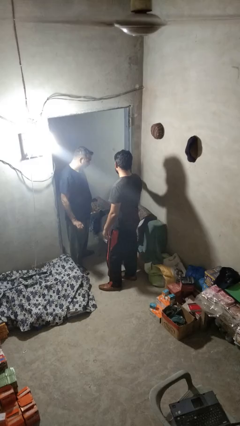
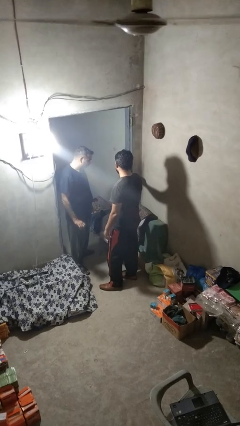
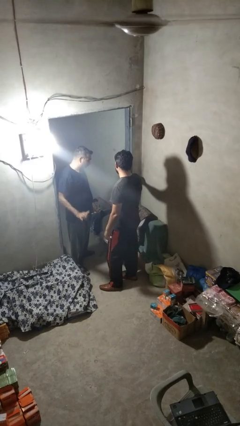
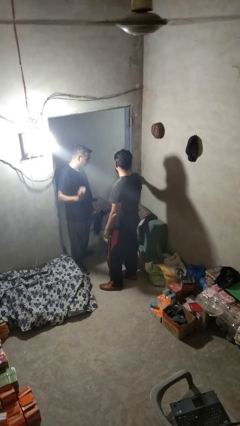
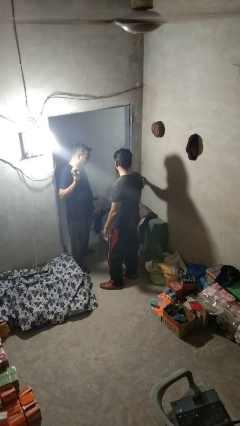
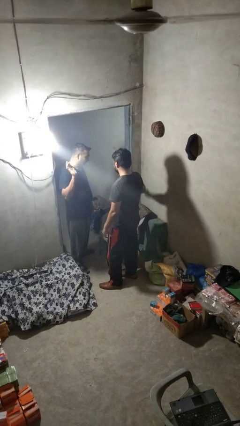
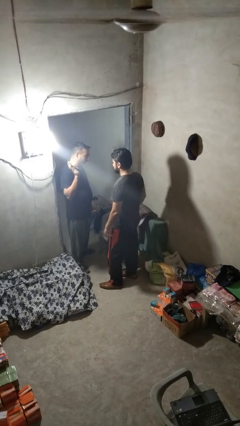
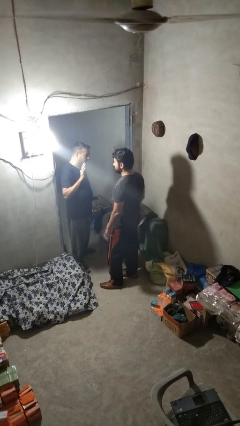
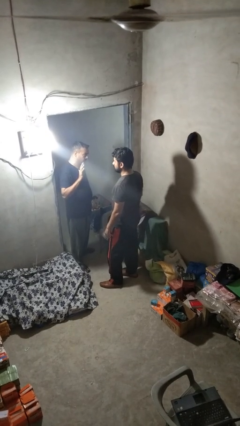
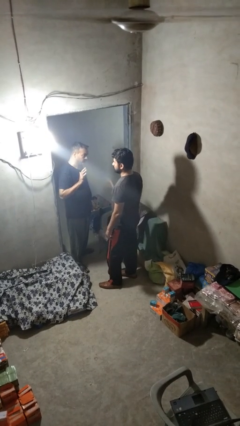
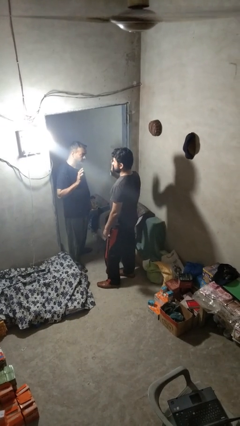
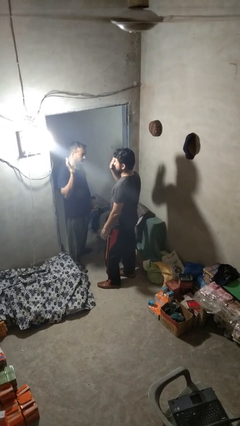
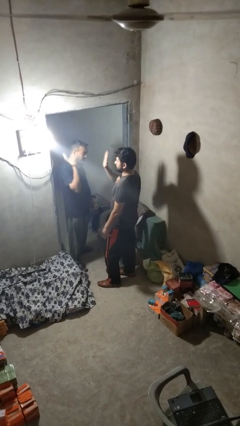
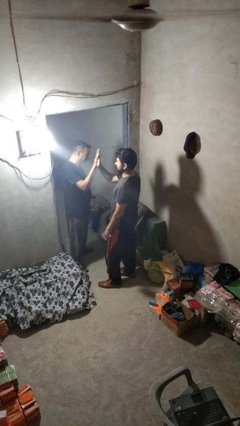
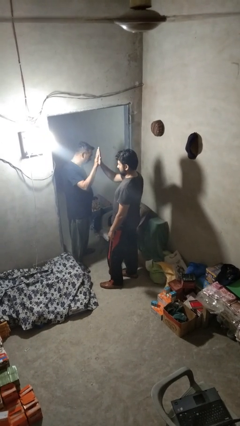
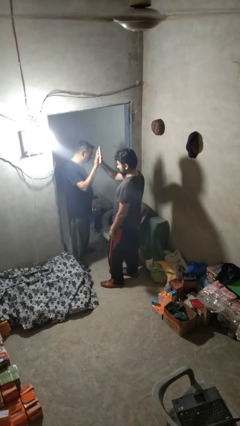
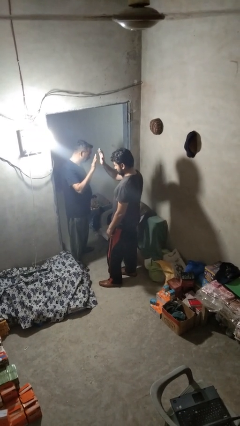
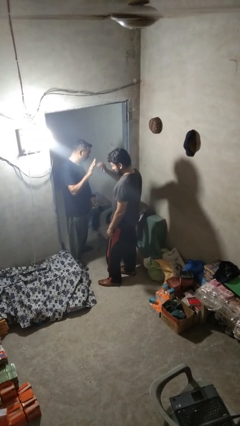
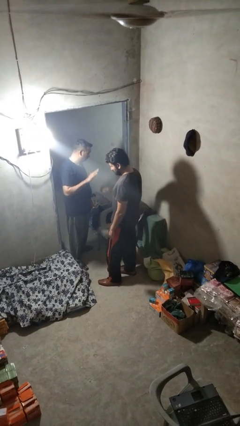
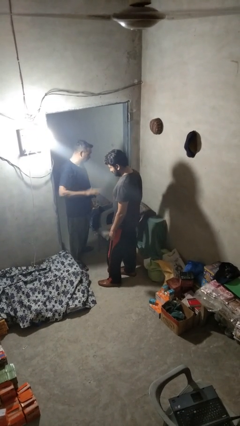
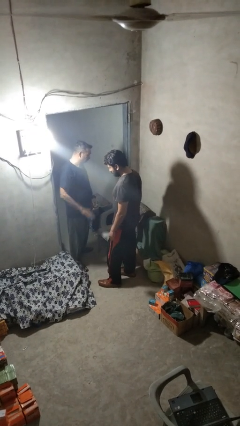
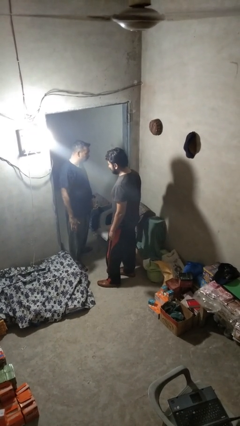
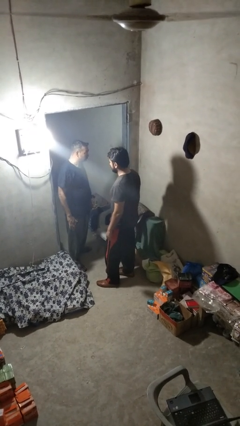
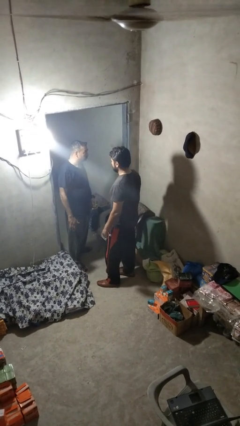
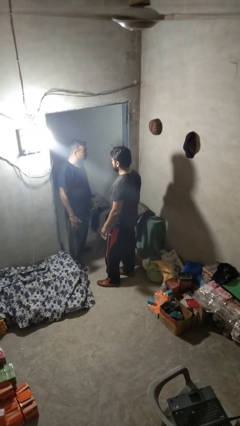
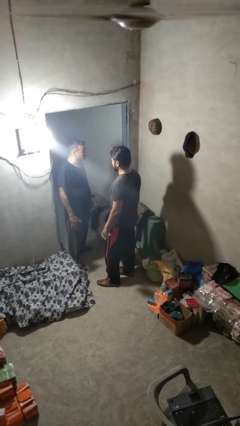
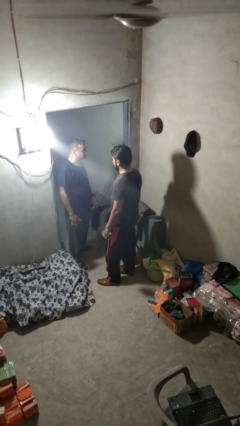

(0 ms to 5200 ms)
person highfives hand

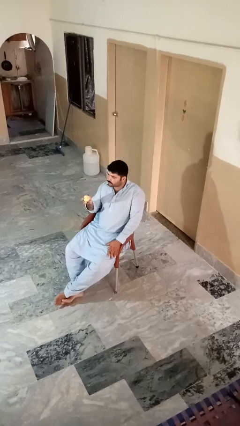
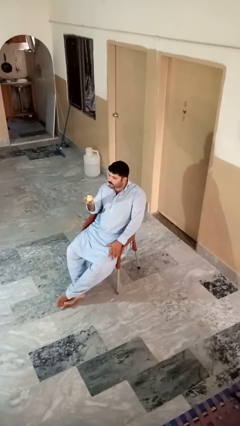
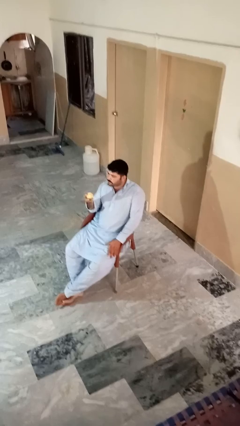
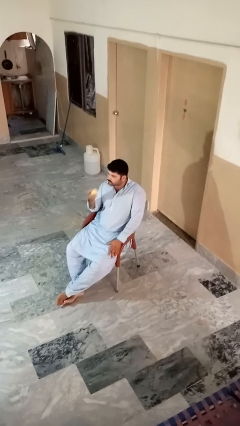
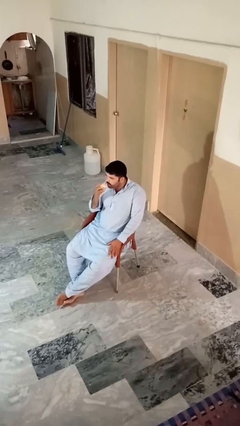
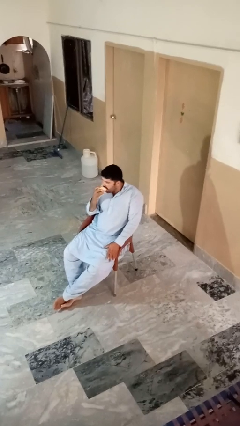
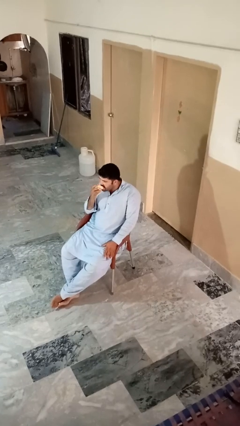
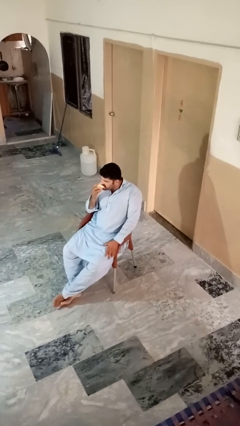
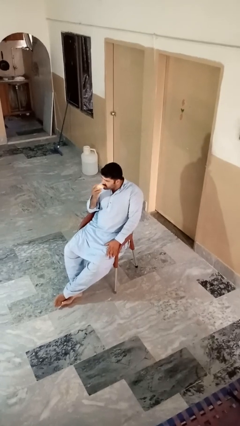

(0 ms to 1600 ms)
person eats apple

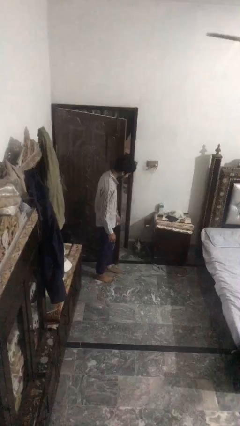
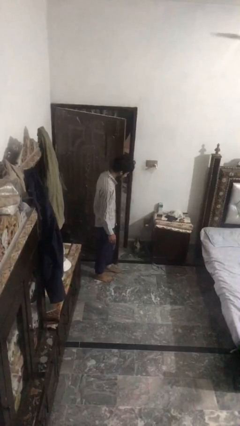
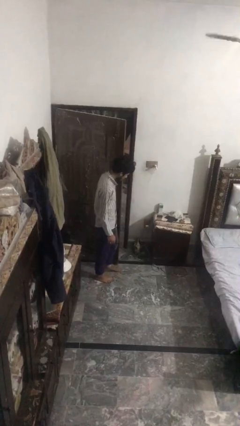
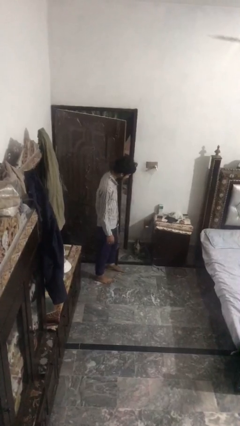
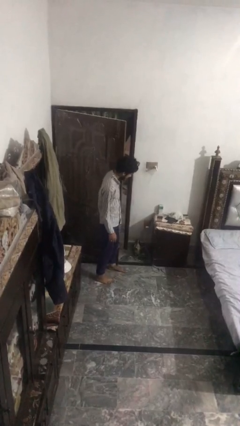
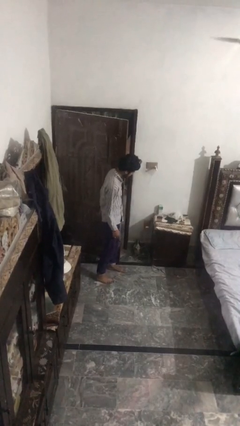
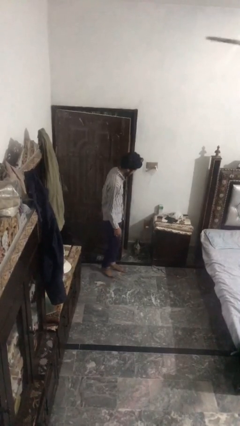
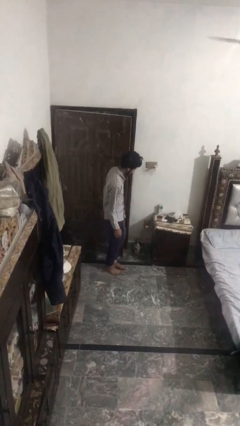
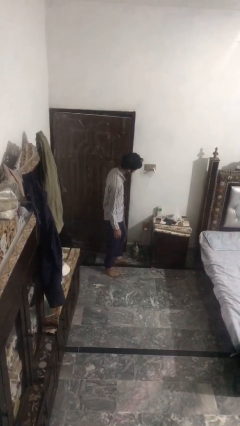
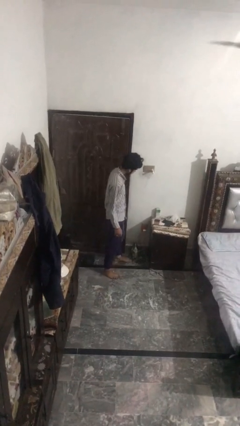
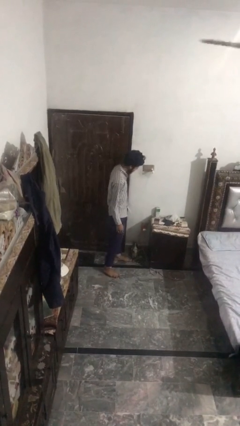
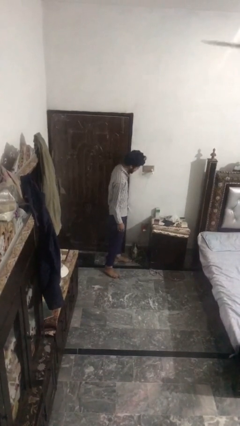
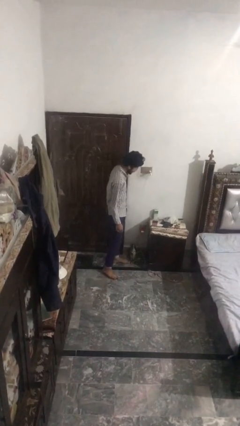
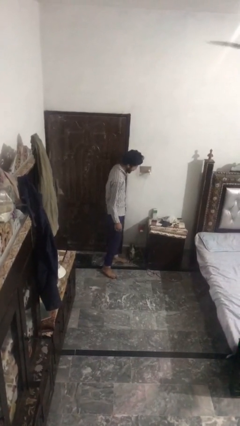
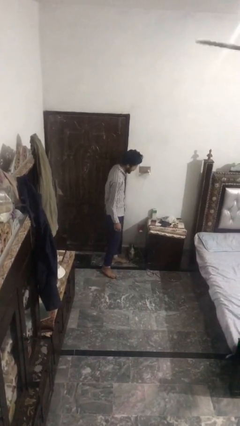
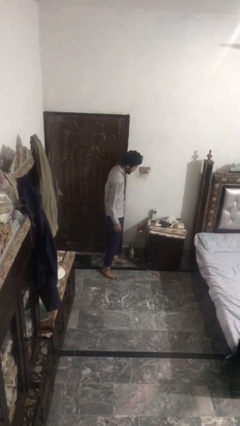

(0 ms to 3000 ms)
person closes door with hip

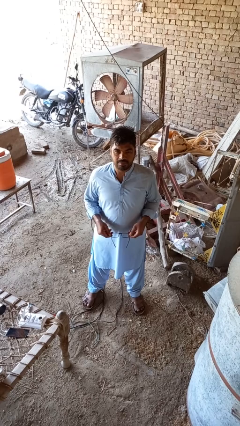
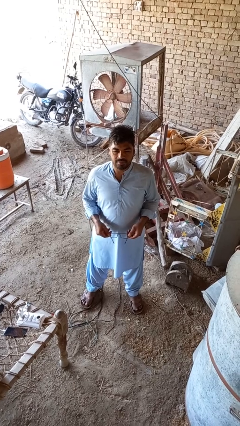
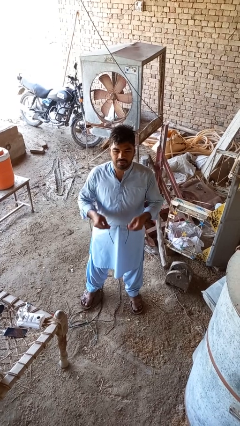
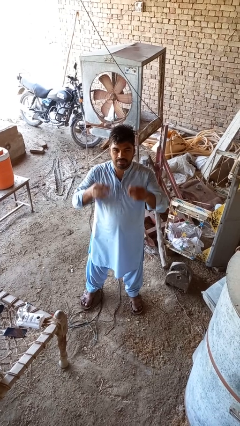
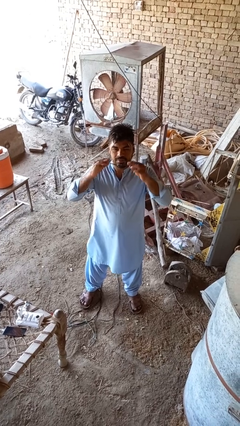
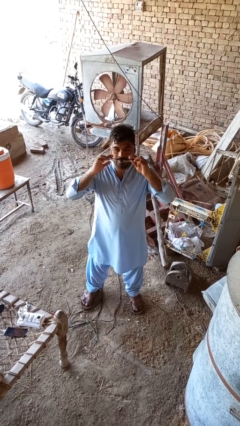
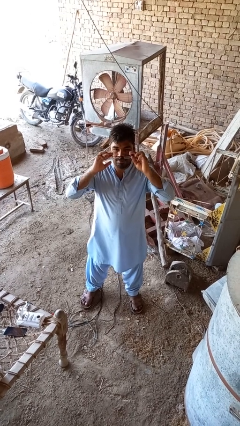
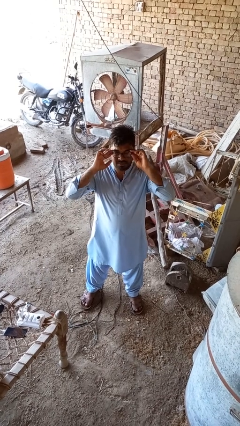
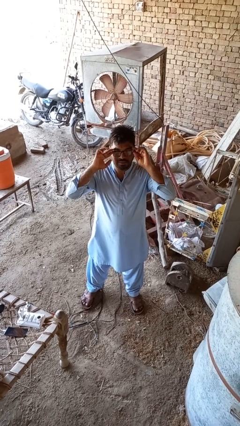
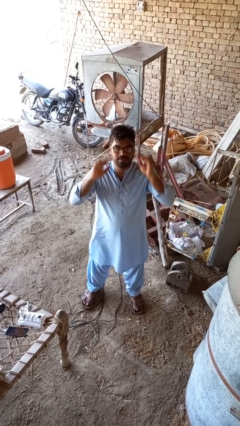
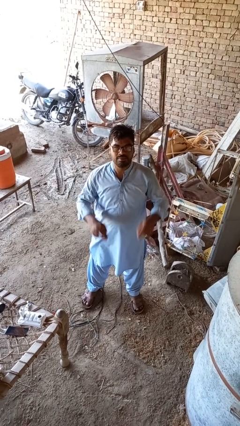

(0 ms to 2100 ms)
person puts on glasses

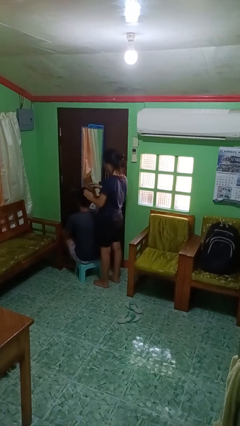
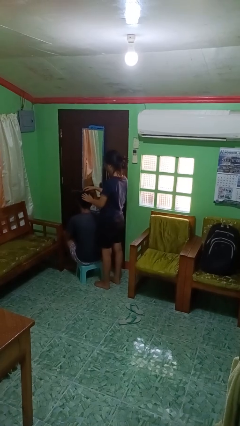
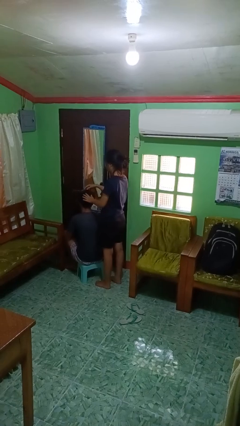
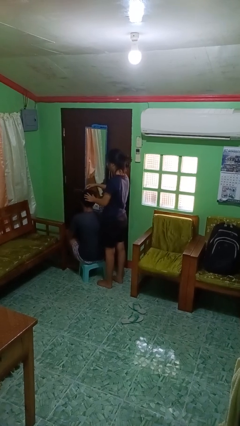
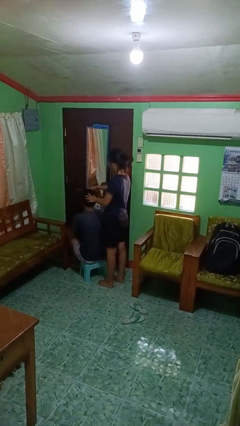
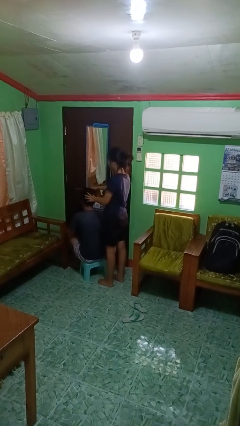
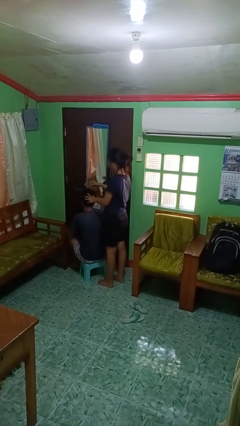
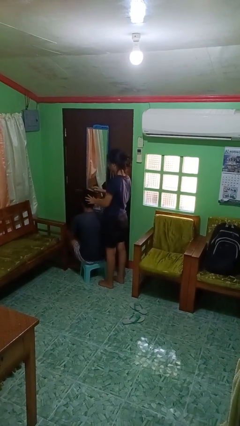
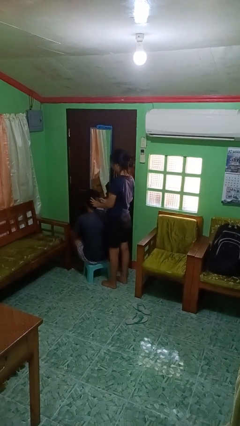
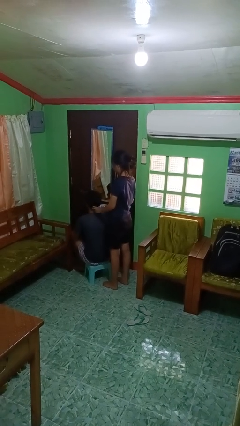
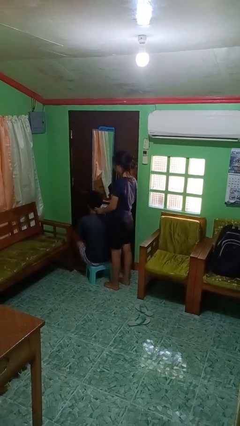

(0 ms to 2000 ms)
person brushes hair of person

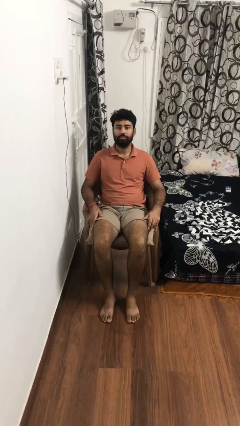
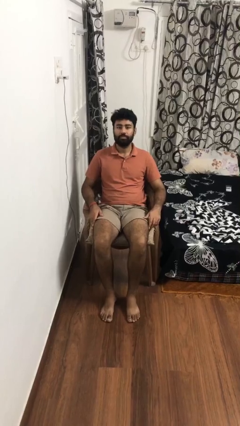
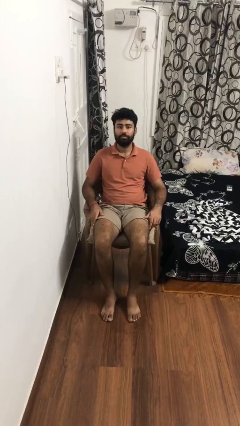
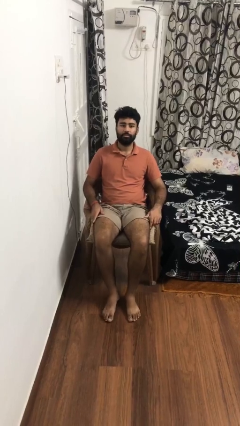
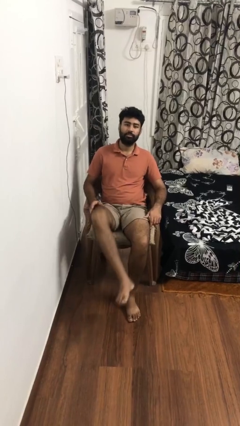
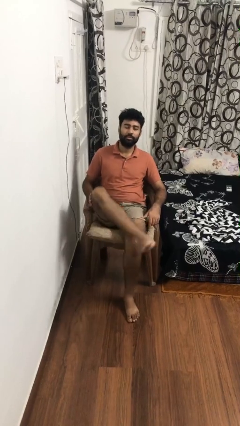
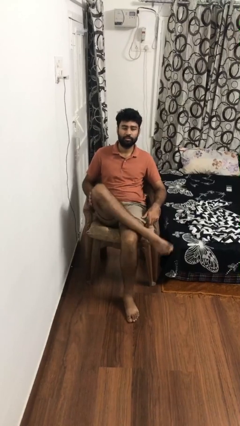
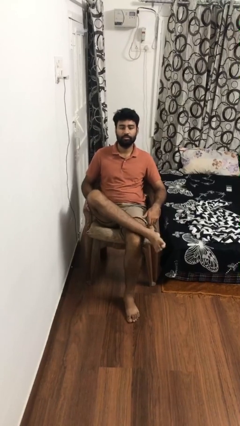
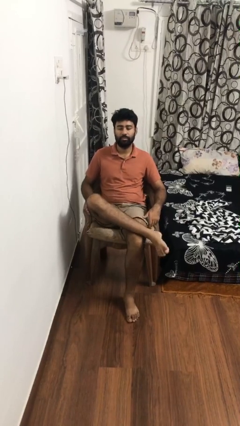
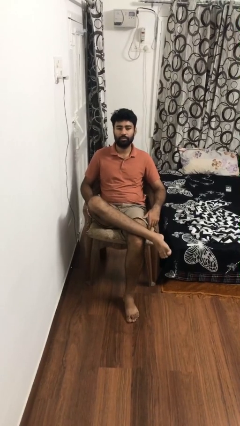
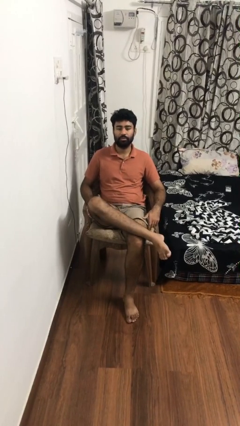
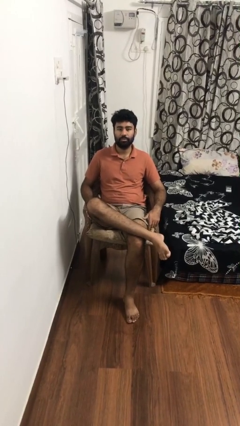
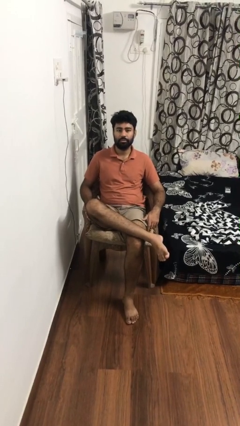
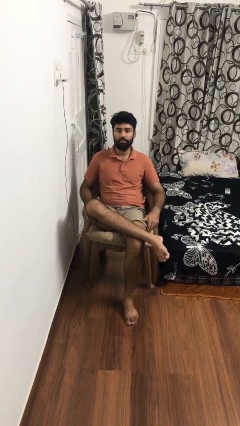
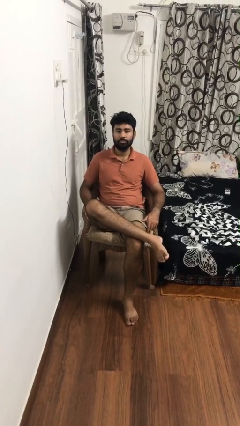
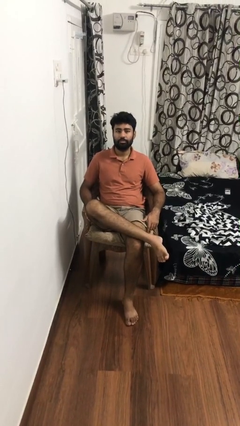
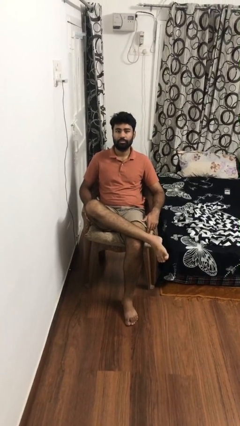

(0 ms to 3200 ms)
person crosses legs

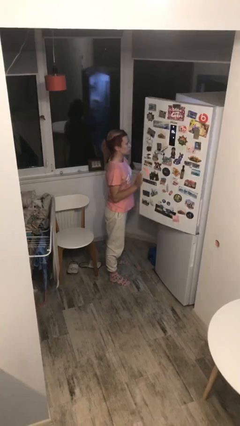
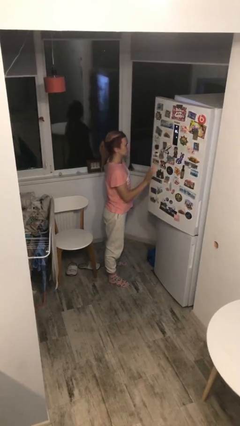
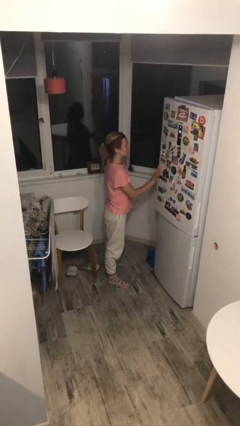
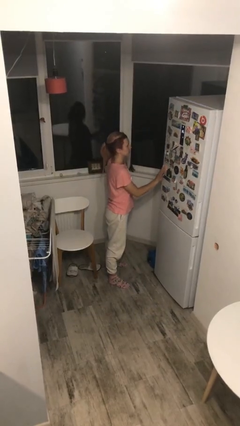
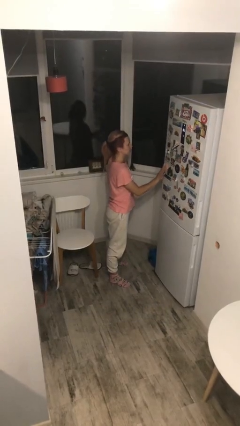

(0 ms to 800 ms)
person closes refrigerator
